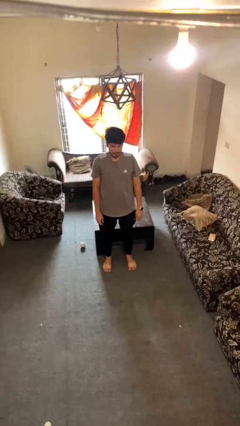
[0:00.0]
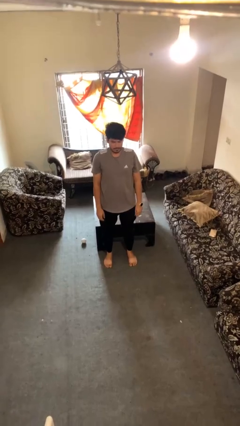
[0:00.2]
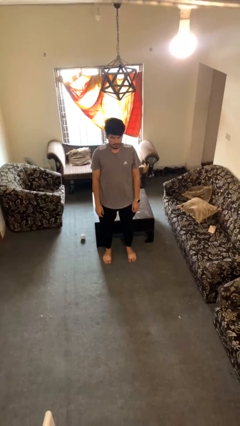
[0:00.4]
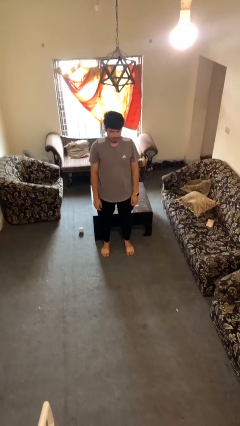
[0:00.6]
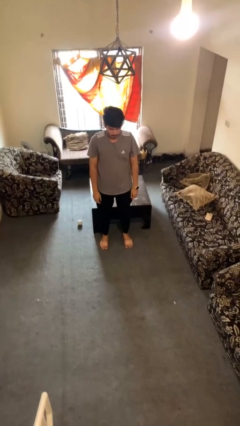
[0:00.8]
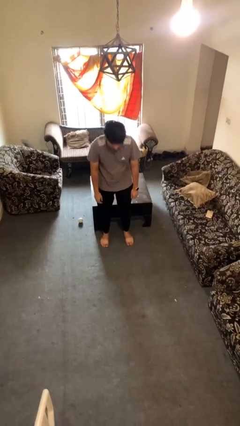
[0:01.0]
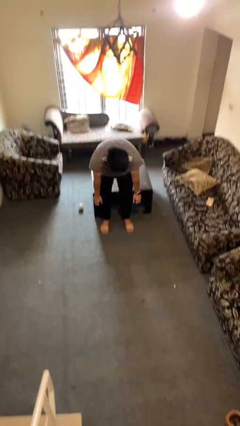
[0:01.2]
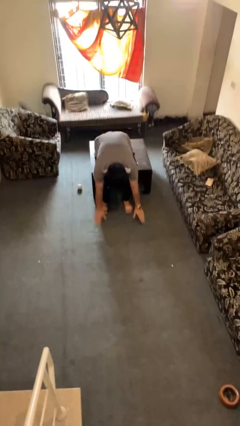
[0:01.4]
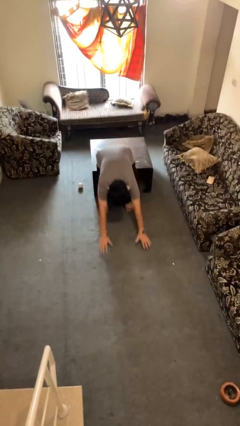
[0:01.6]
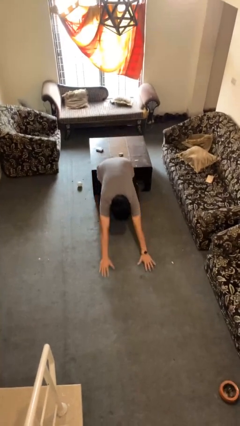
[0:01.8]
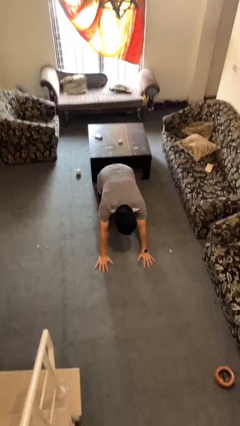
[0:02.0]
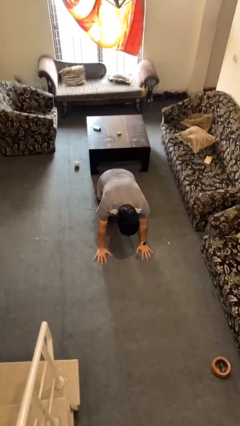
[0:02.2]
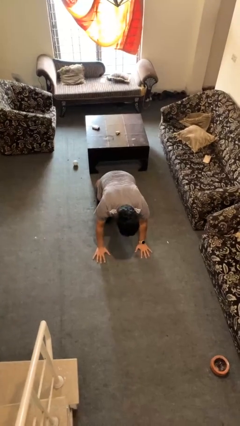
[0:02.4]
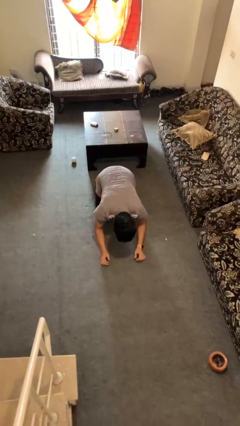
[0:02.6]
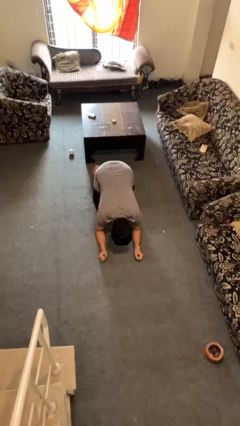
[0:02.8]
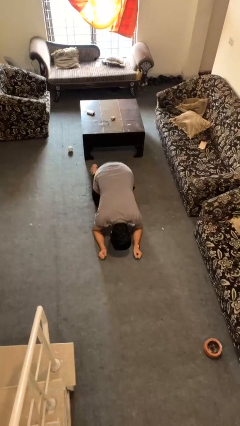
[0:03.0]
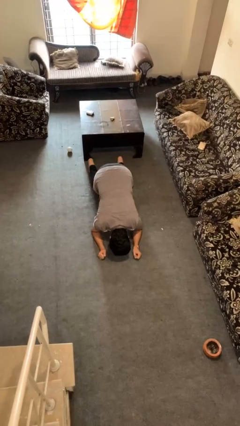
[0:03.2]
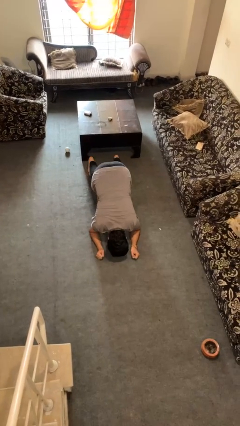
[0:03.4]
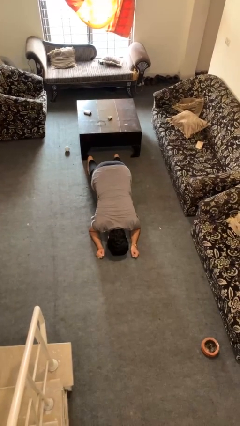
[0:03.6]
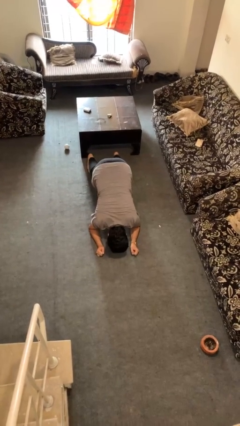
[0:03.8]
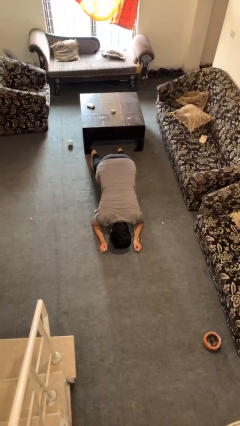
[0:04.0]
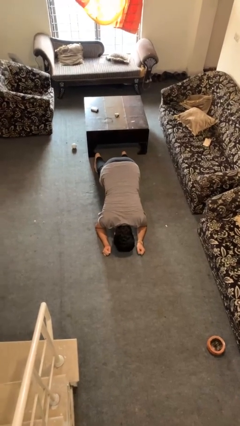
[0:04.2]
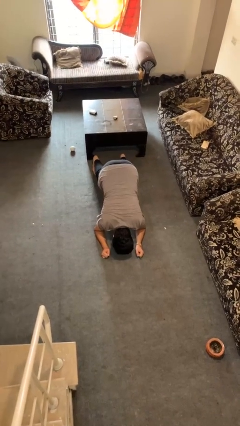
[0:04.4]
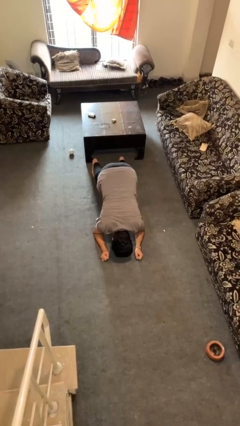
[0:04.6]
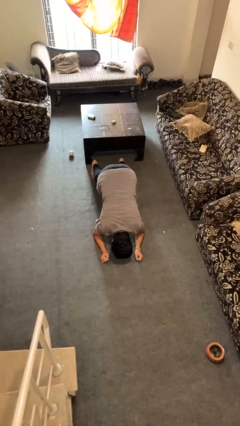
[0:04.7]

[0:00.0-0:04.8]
person exercises with plank

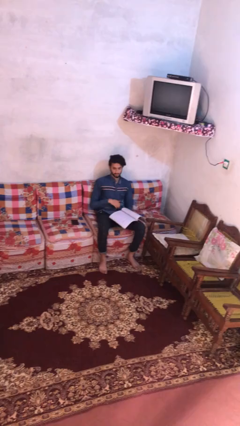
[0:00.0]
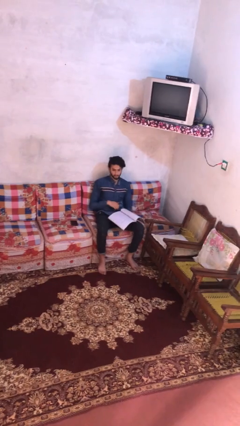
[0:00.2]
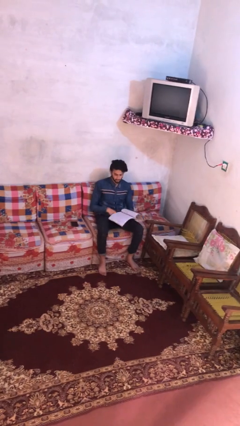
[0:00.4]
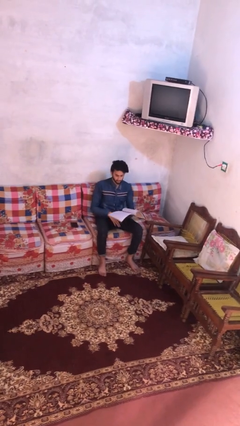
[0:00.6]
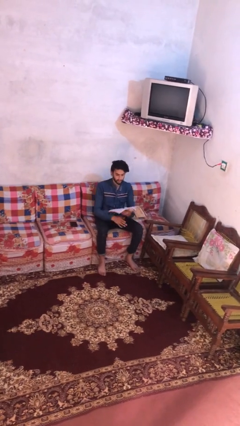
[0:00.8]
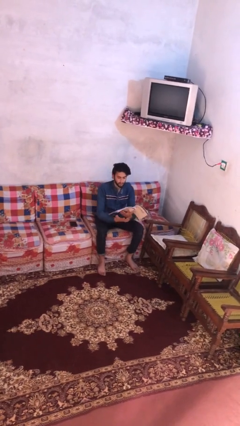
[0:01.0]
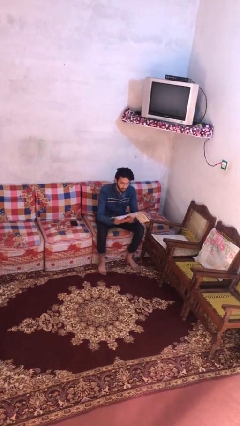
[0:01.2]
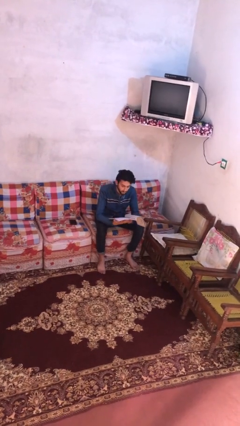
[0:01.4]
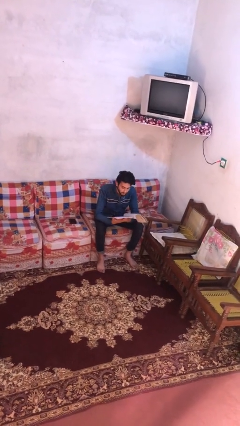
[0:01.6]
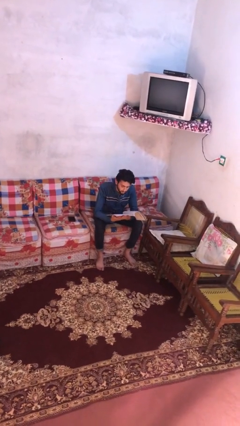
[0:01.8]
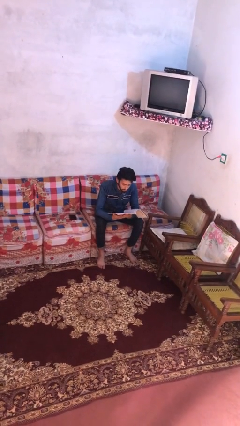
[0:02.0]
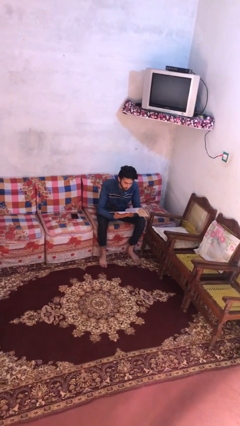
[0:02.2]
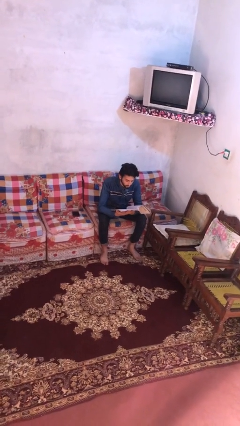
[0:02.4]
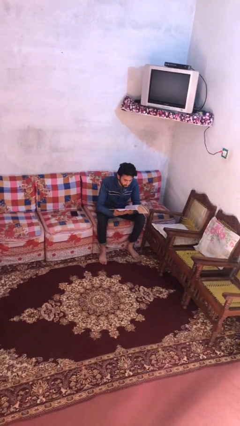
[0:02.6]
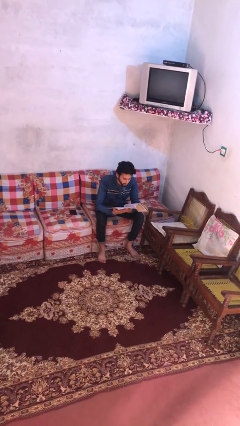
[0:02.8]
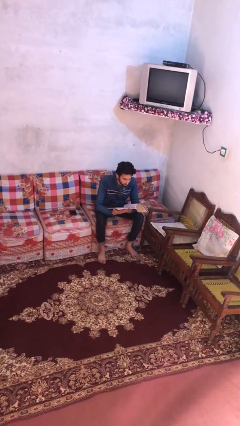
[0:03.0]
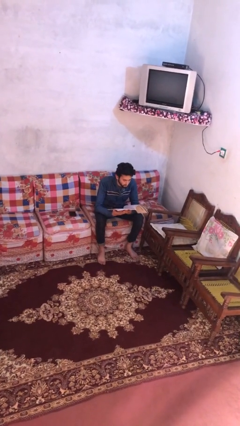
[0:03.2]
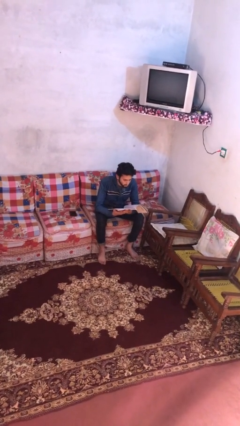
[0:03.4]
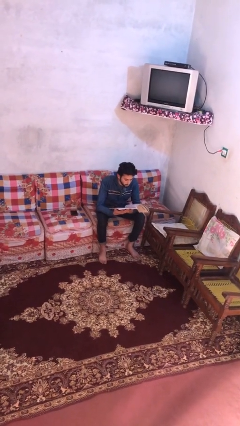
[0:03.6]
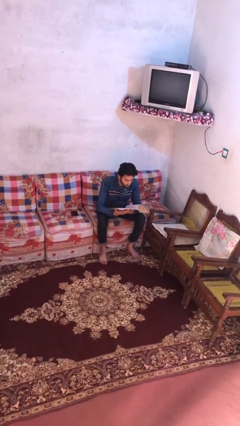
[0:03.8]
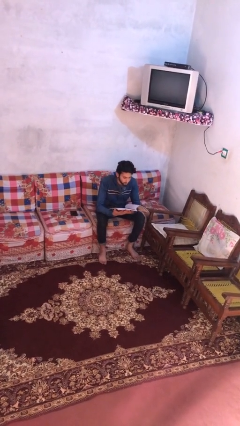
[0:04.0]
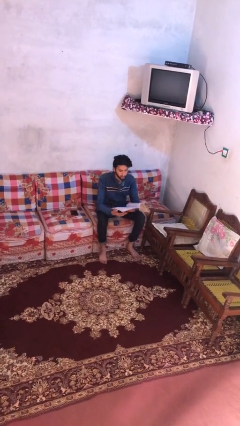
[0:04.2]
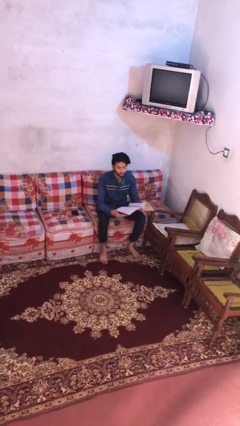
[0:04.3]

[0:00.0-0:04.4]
person reads document

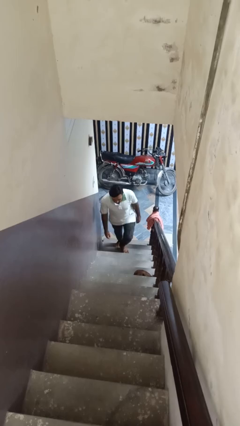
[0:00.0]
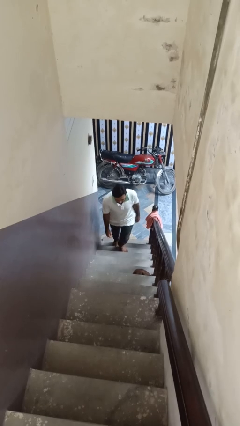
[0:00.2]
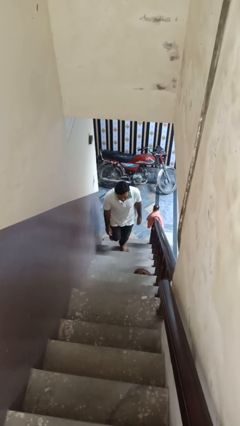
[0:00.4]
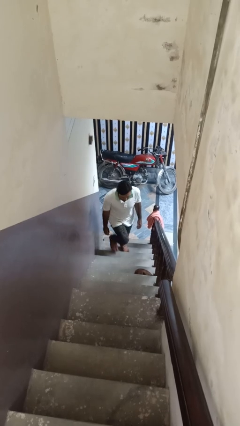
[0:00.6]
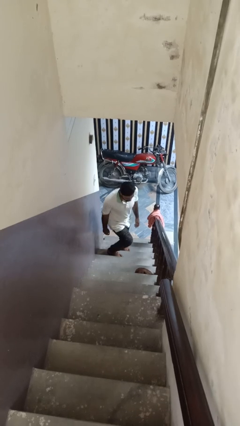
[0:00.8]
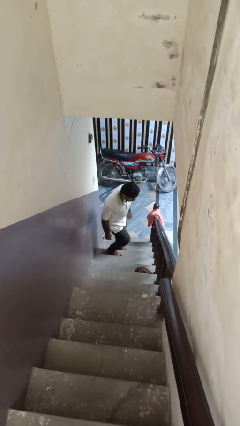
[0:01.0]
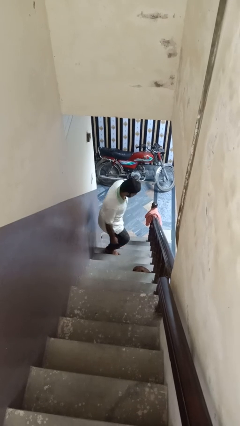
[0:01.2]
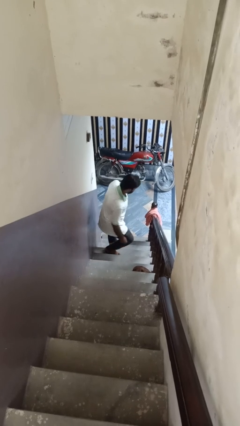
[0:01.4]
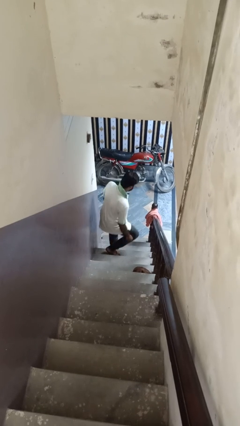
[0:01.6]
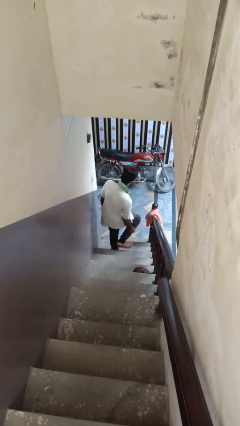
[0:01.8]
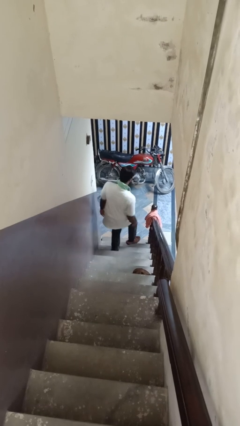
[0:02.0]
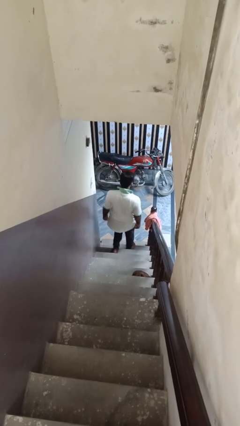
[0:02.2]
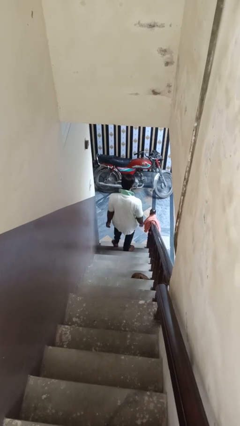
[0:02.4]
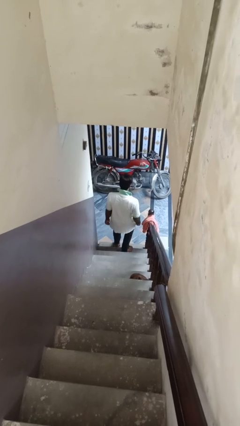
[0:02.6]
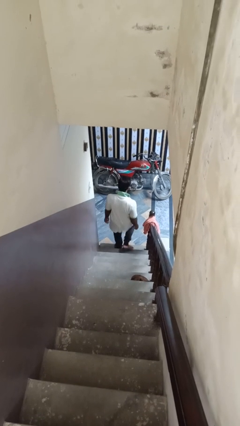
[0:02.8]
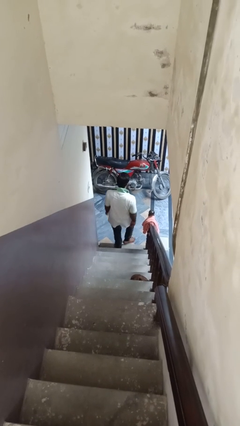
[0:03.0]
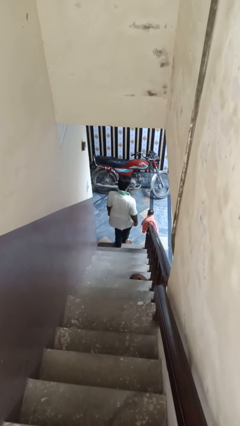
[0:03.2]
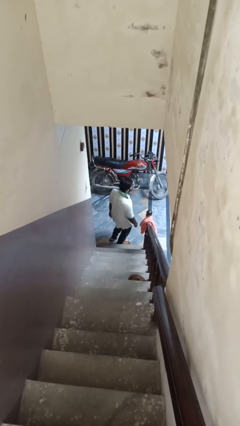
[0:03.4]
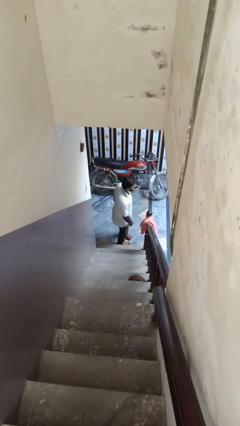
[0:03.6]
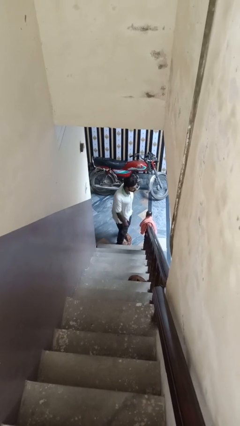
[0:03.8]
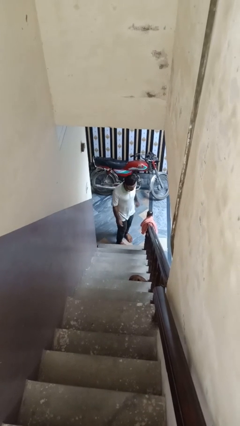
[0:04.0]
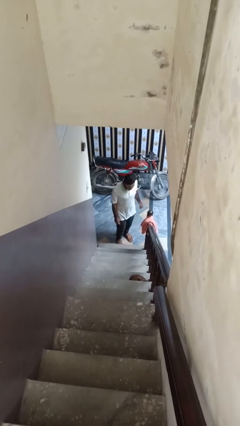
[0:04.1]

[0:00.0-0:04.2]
person climbs down ladder

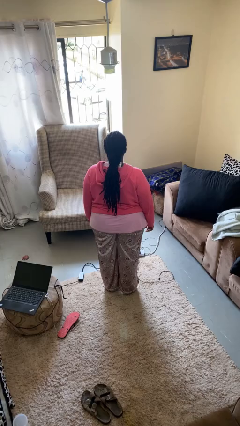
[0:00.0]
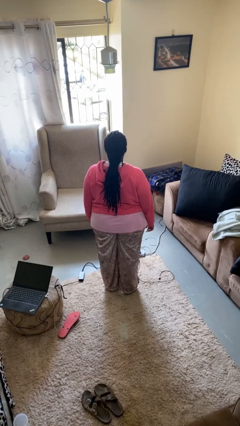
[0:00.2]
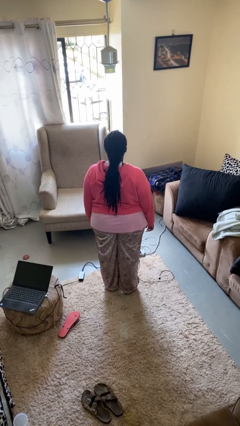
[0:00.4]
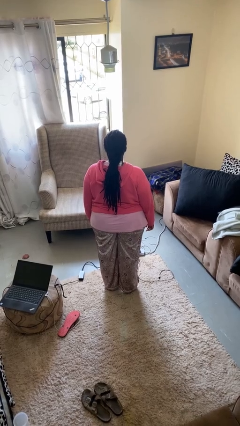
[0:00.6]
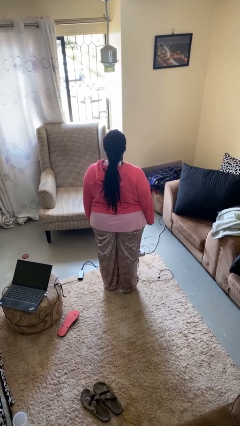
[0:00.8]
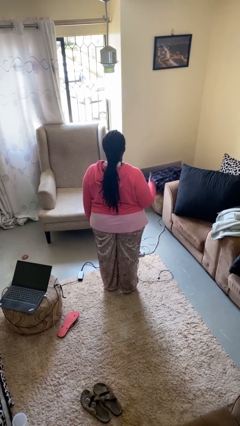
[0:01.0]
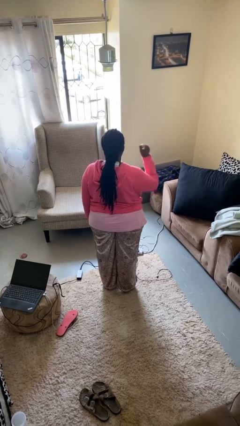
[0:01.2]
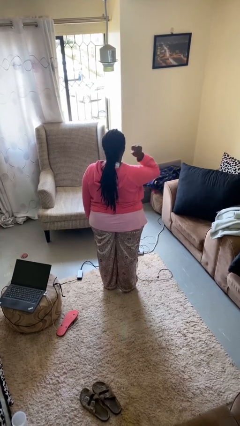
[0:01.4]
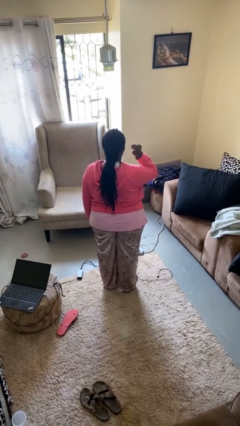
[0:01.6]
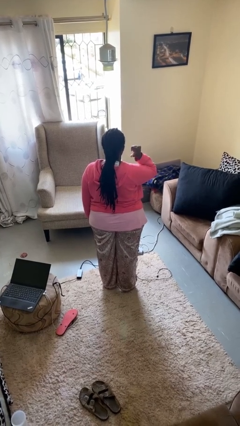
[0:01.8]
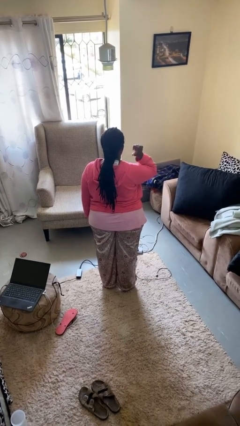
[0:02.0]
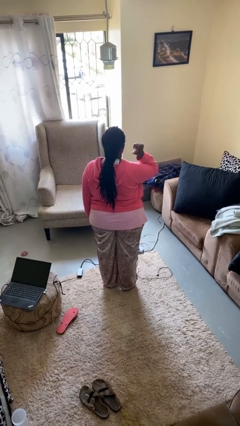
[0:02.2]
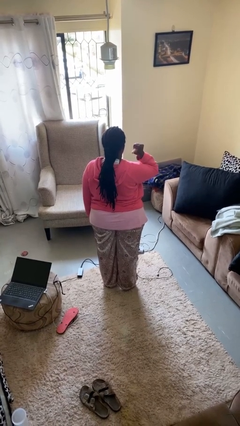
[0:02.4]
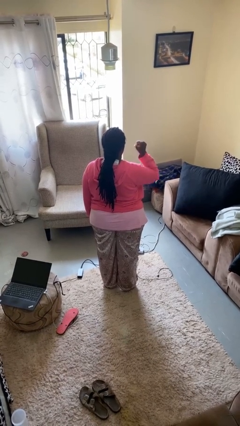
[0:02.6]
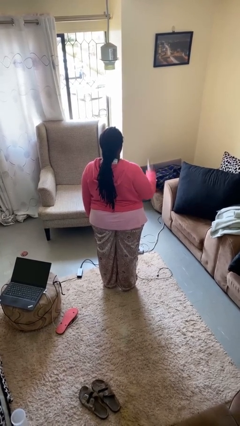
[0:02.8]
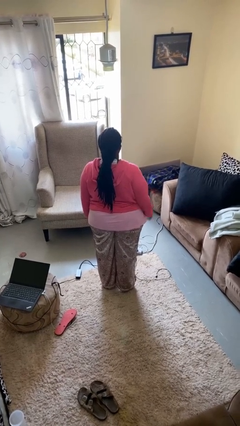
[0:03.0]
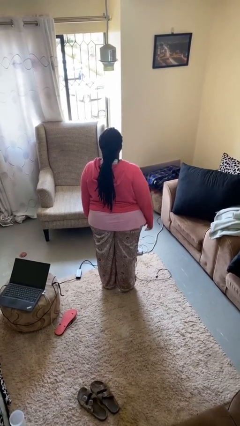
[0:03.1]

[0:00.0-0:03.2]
person gestures behind me

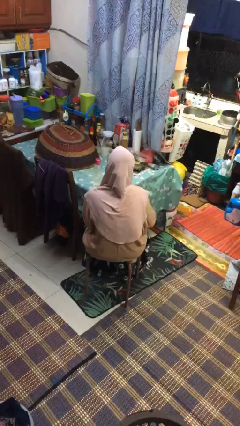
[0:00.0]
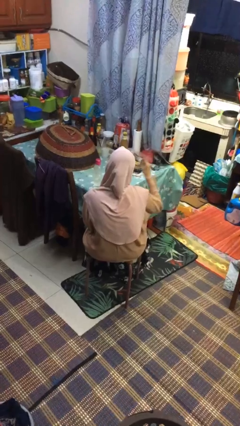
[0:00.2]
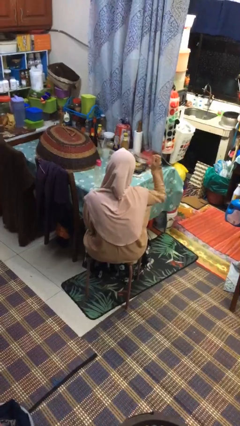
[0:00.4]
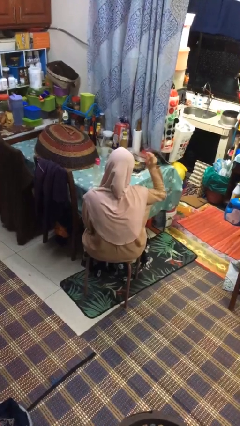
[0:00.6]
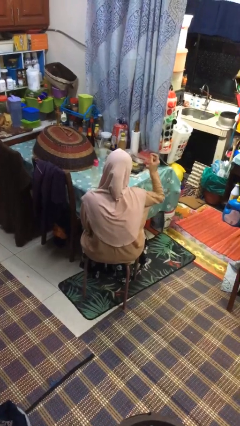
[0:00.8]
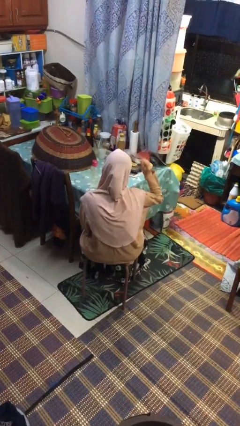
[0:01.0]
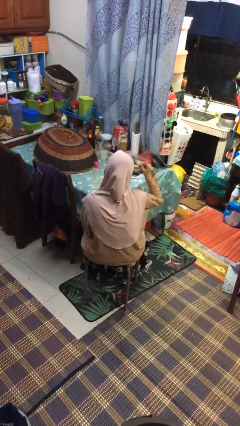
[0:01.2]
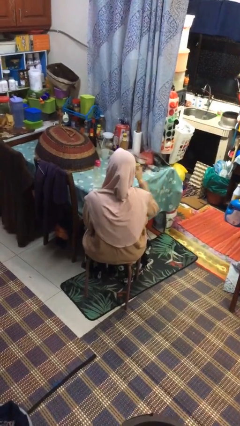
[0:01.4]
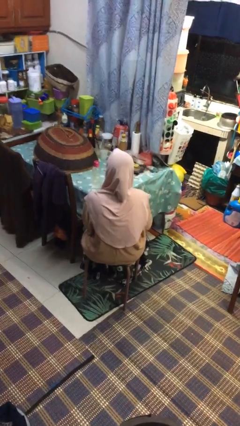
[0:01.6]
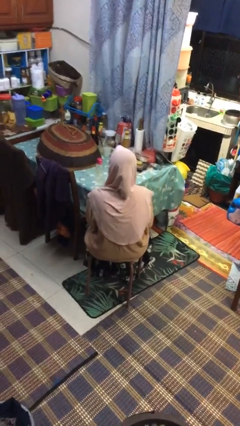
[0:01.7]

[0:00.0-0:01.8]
person snaps fingers
